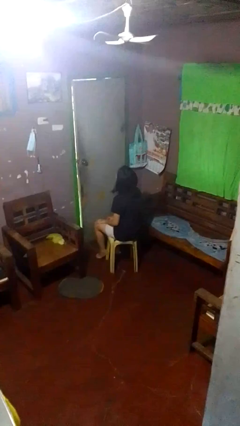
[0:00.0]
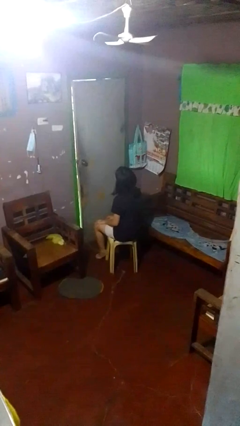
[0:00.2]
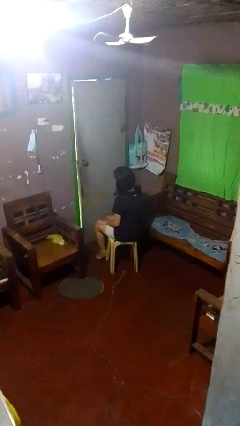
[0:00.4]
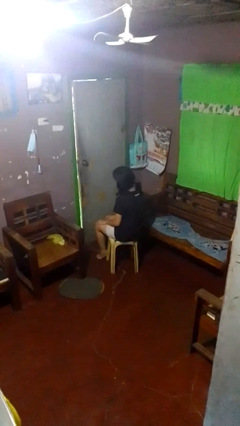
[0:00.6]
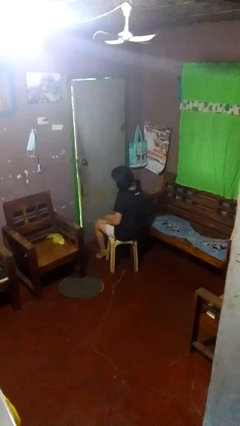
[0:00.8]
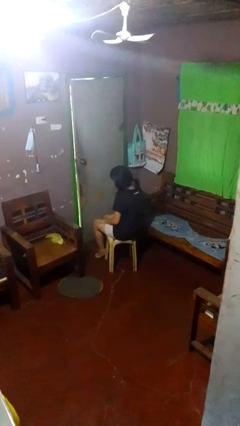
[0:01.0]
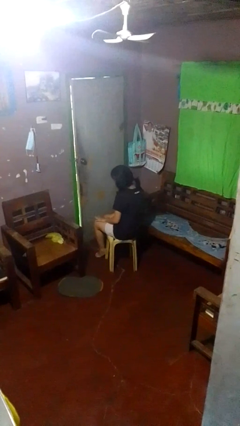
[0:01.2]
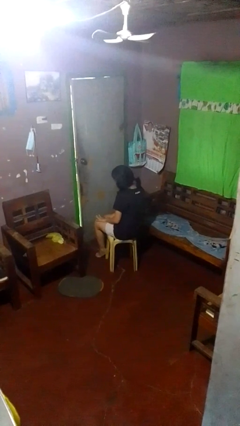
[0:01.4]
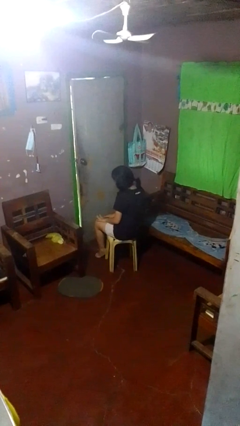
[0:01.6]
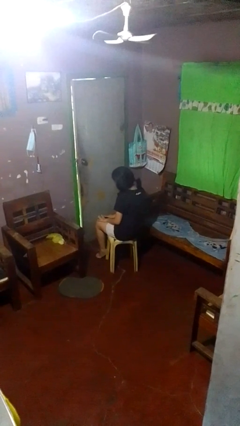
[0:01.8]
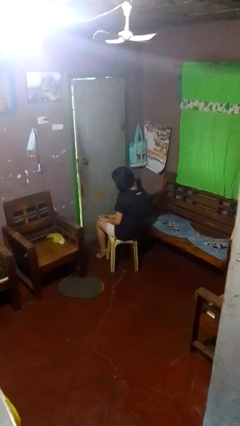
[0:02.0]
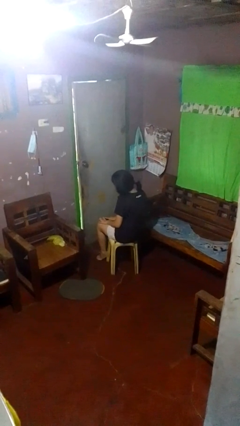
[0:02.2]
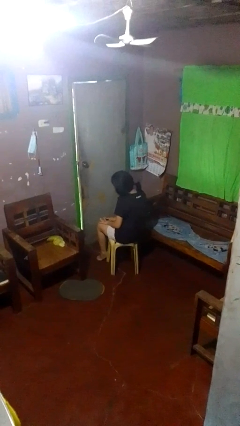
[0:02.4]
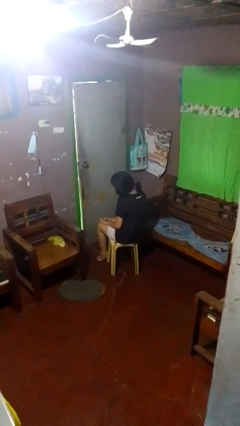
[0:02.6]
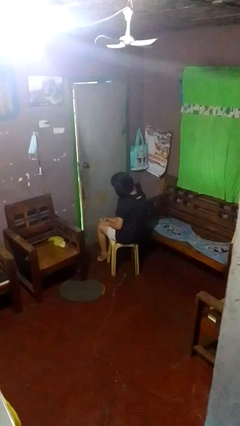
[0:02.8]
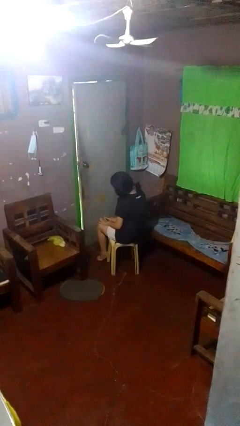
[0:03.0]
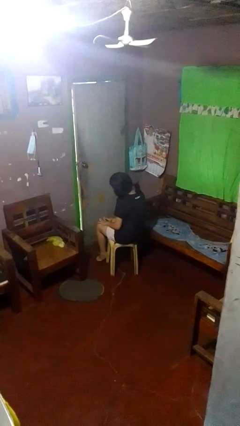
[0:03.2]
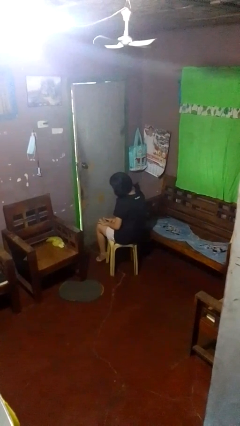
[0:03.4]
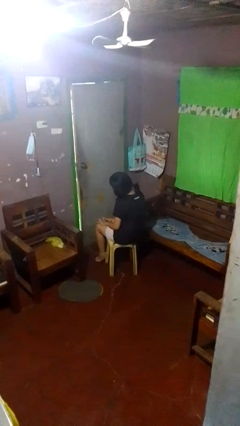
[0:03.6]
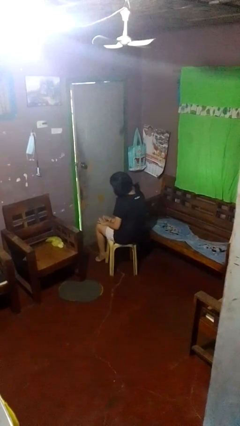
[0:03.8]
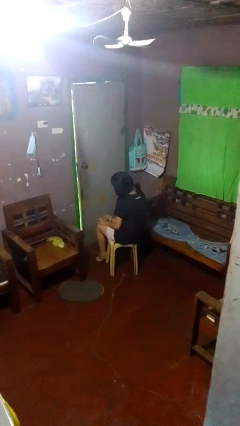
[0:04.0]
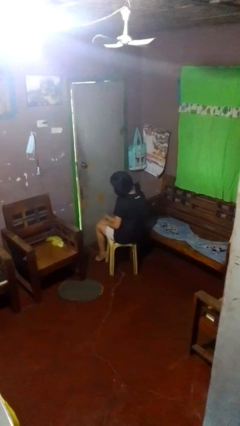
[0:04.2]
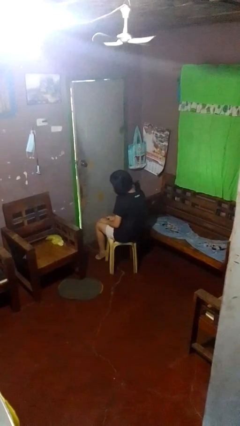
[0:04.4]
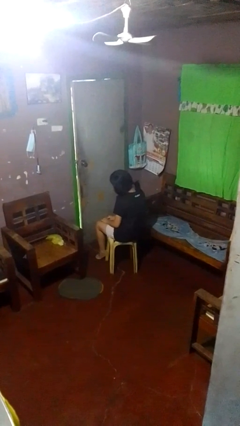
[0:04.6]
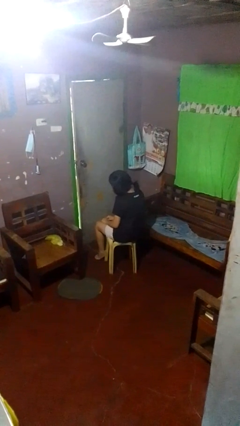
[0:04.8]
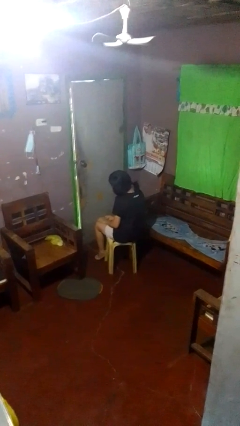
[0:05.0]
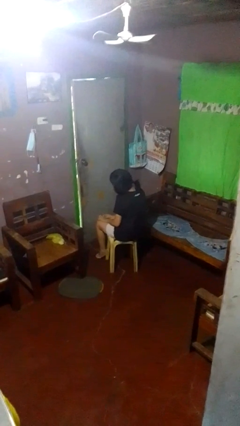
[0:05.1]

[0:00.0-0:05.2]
person looks at hands in lap

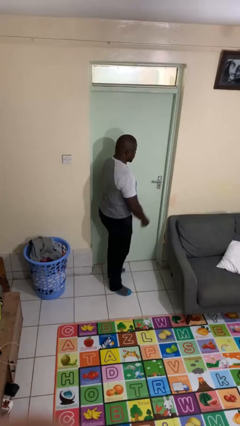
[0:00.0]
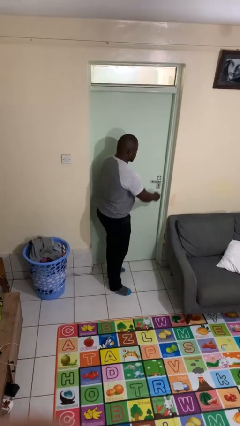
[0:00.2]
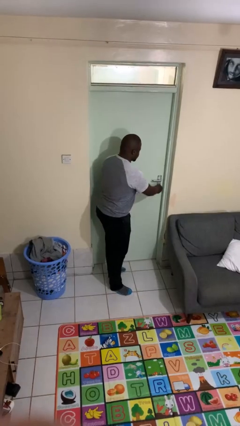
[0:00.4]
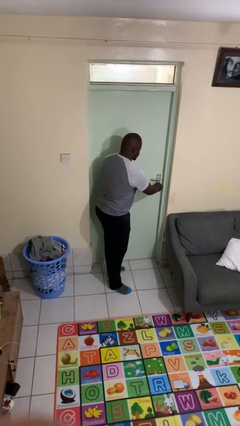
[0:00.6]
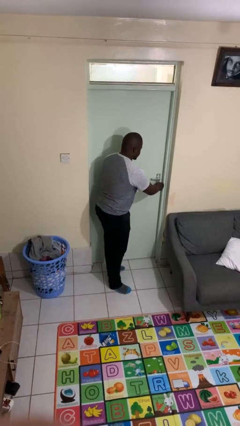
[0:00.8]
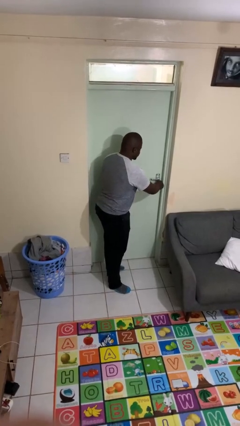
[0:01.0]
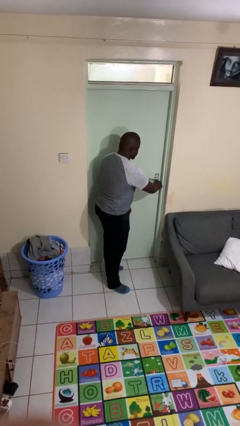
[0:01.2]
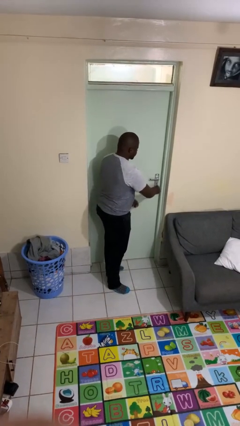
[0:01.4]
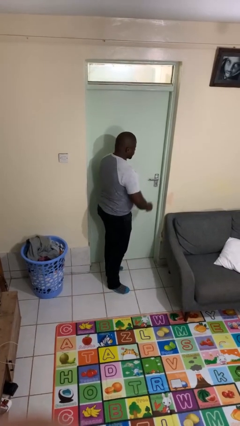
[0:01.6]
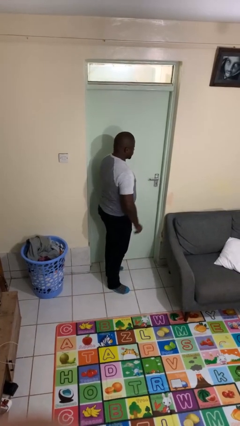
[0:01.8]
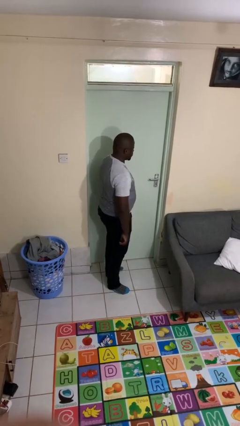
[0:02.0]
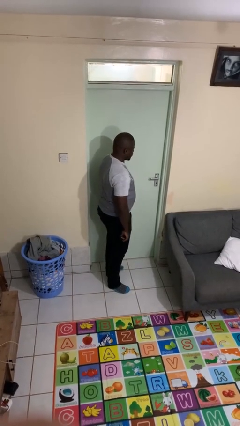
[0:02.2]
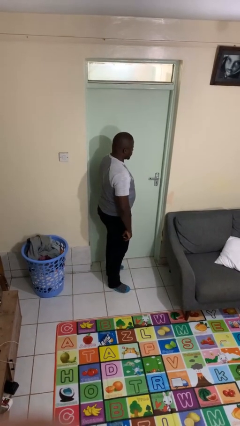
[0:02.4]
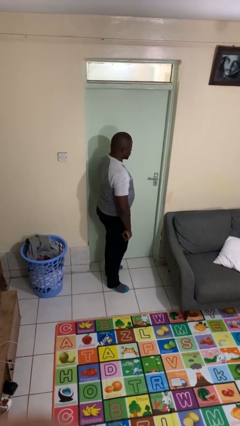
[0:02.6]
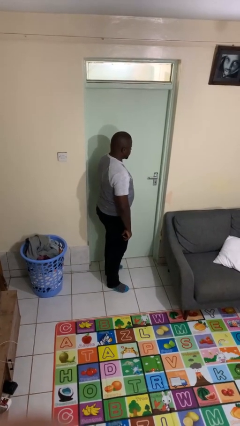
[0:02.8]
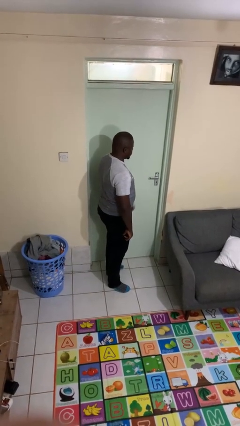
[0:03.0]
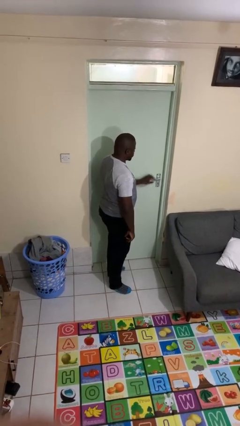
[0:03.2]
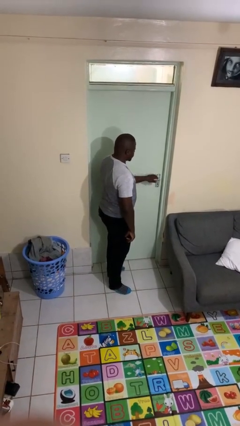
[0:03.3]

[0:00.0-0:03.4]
person unlocks door with keys

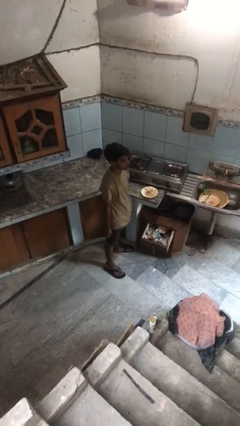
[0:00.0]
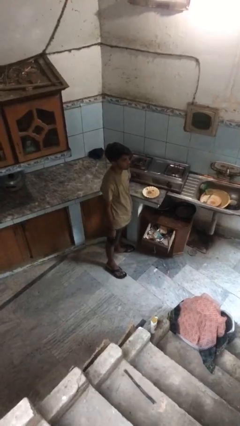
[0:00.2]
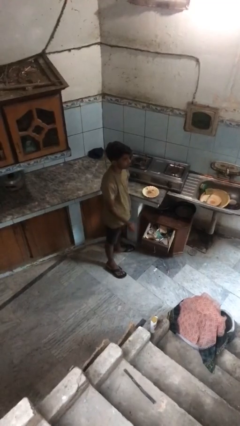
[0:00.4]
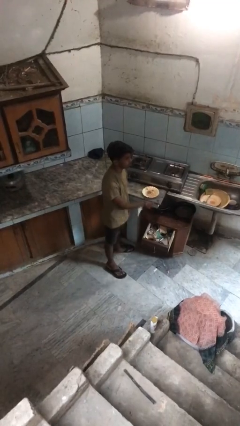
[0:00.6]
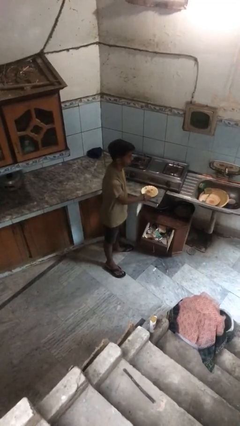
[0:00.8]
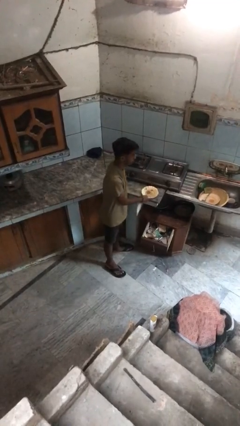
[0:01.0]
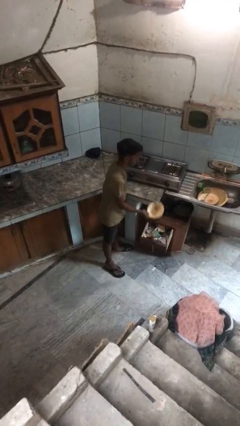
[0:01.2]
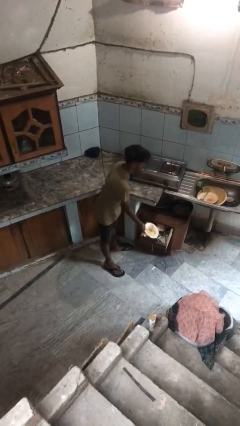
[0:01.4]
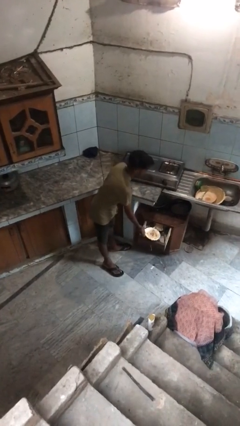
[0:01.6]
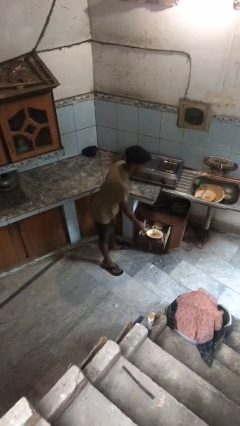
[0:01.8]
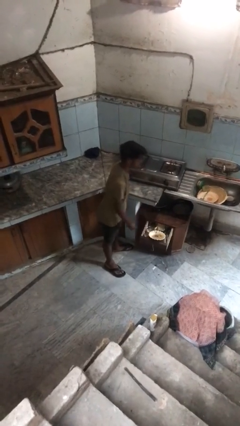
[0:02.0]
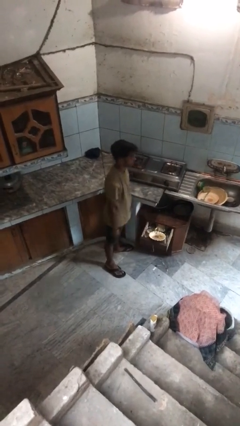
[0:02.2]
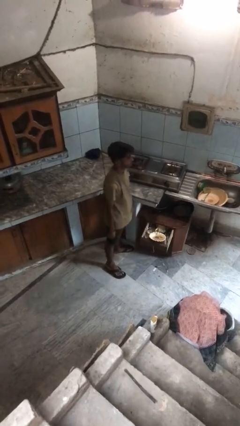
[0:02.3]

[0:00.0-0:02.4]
person puts object into kitchen drawer

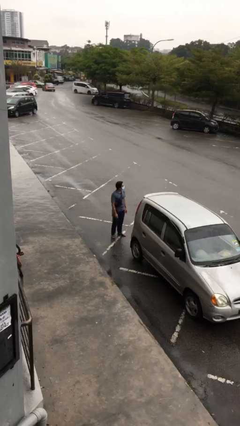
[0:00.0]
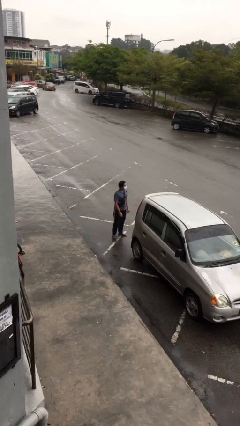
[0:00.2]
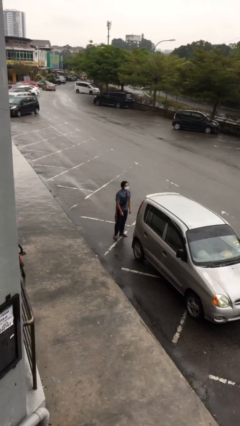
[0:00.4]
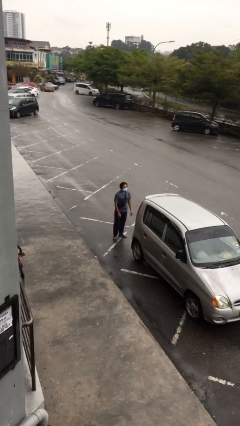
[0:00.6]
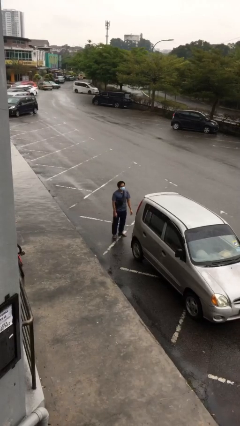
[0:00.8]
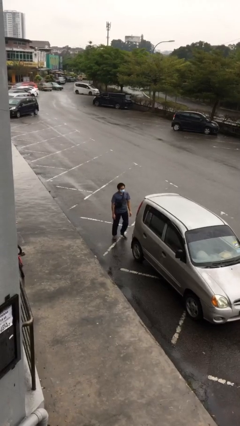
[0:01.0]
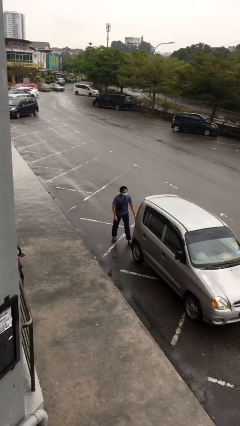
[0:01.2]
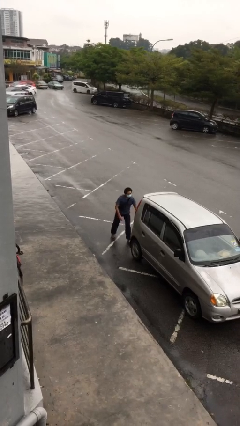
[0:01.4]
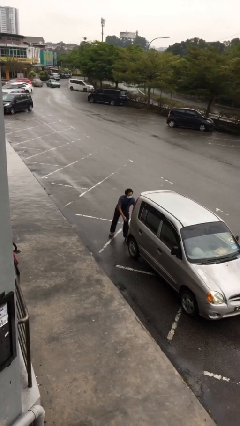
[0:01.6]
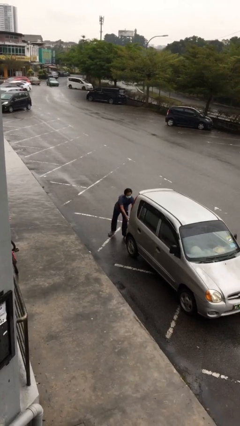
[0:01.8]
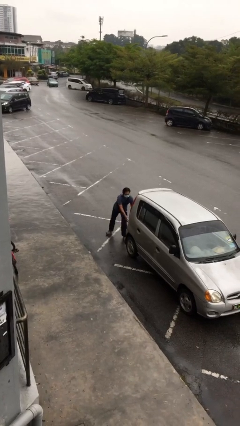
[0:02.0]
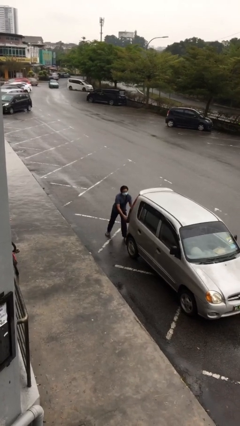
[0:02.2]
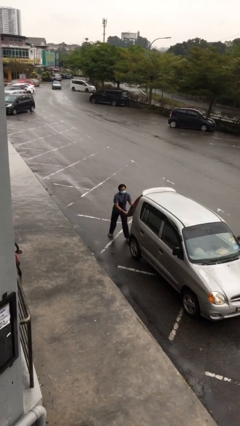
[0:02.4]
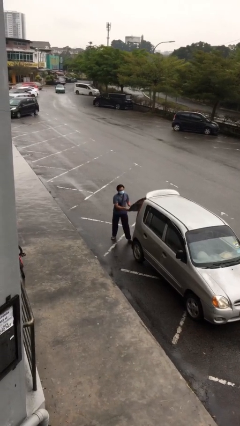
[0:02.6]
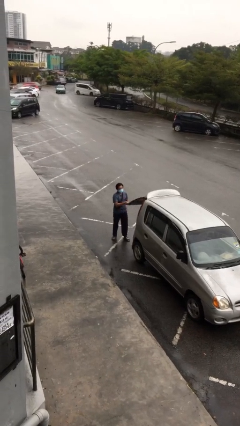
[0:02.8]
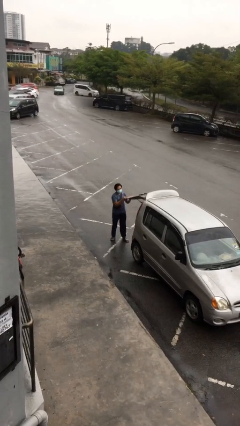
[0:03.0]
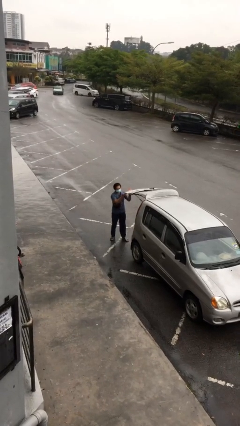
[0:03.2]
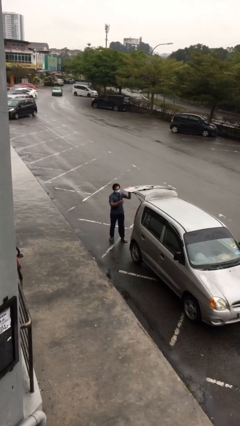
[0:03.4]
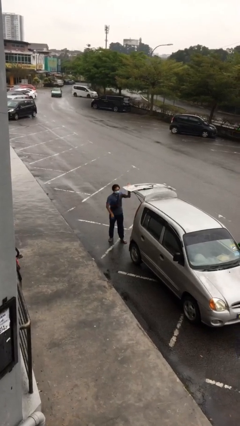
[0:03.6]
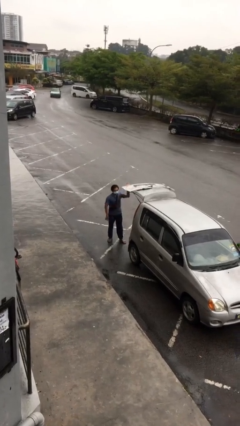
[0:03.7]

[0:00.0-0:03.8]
person opens car trunk

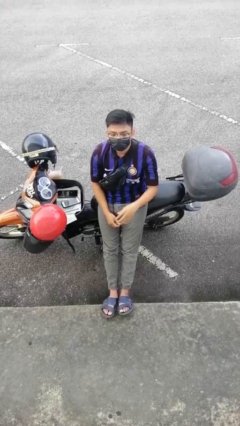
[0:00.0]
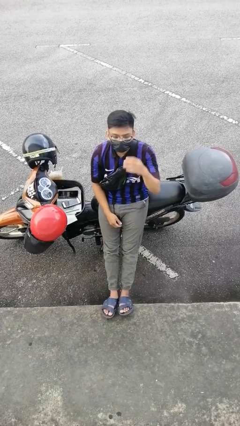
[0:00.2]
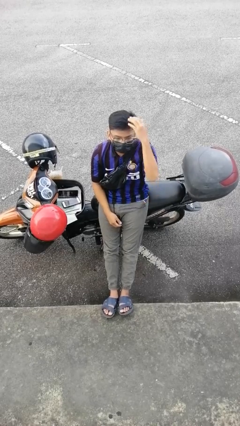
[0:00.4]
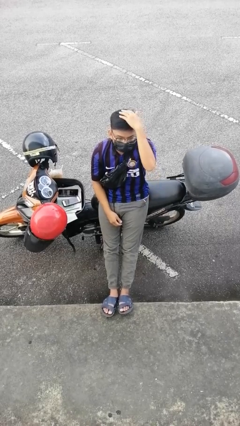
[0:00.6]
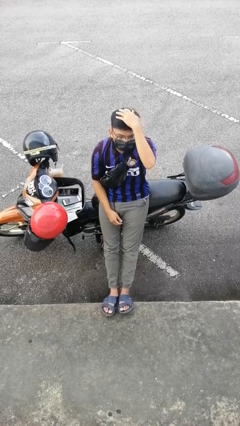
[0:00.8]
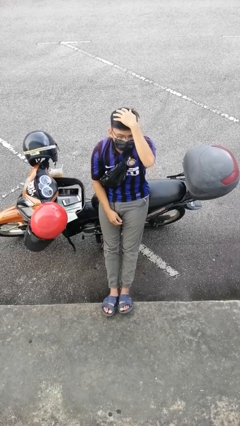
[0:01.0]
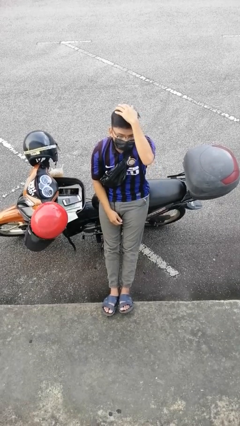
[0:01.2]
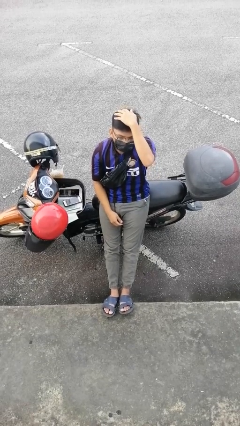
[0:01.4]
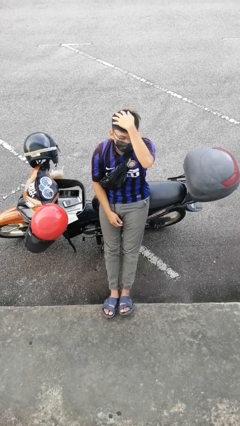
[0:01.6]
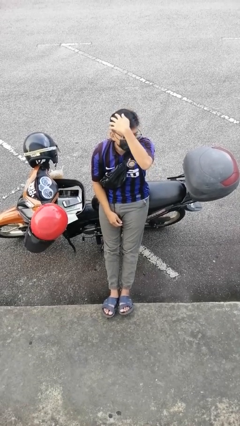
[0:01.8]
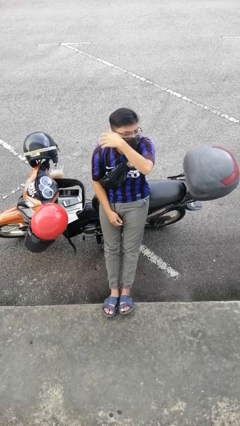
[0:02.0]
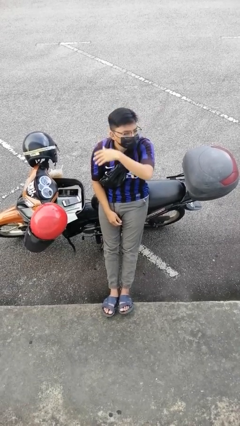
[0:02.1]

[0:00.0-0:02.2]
person pats head

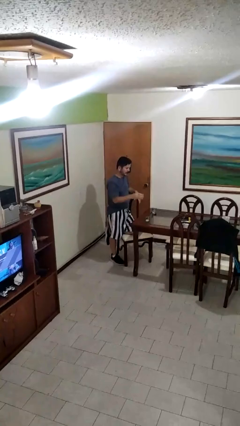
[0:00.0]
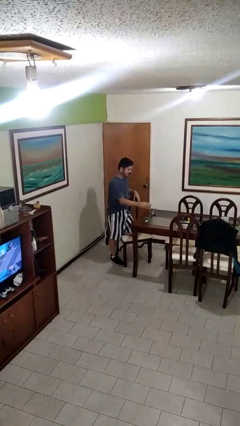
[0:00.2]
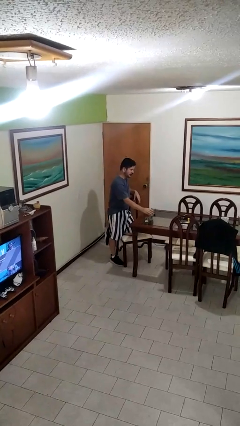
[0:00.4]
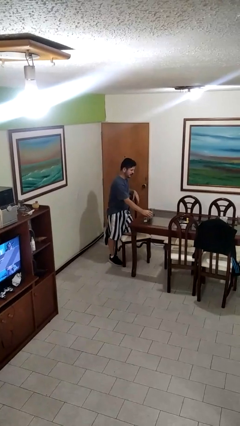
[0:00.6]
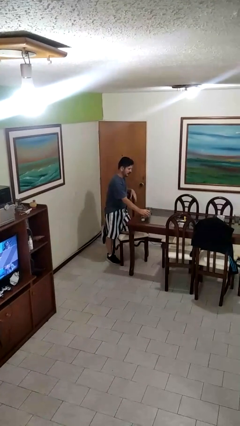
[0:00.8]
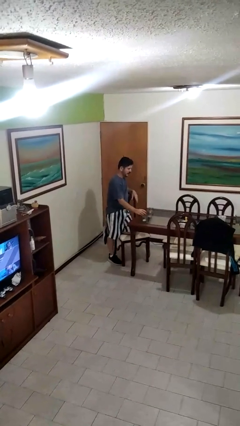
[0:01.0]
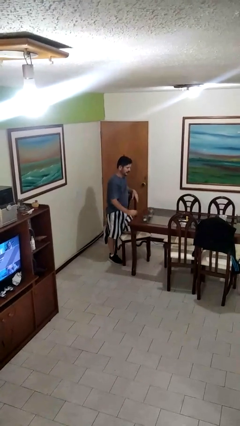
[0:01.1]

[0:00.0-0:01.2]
person puts down object on table
